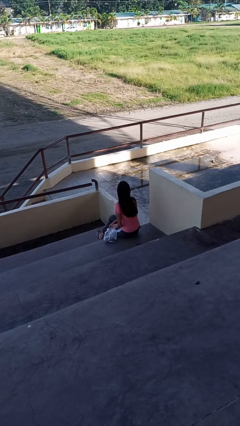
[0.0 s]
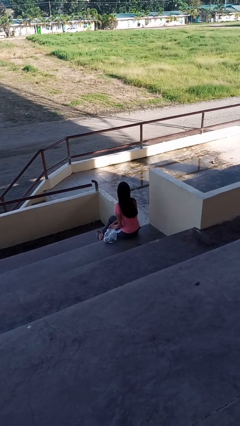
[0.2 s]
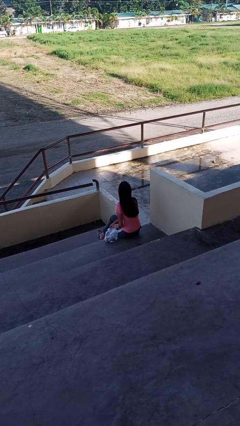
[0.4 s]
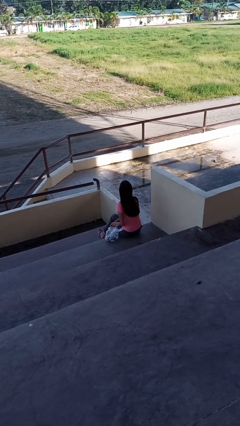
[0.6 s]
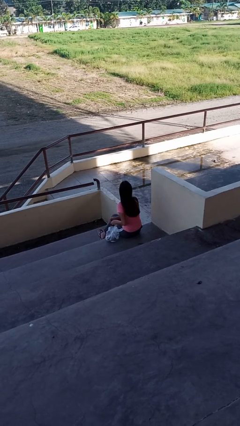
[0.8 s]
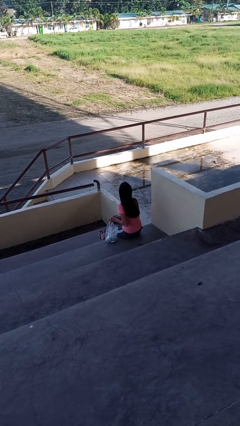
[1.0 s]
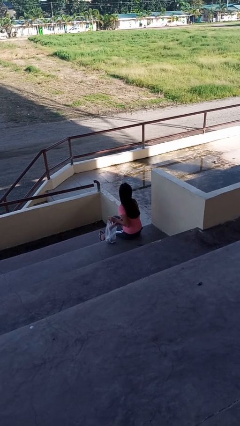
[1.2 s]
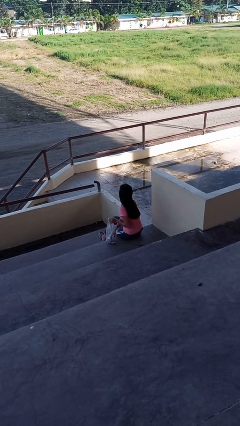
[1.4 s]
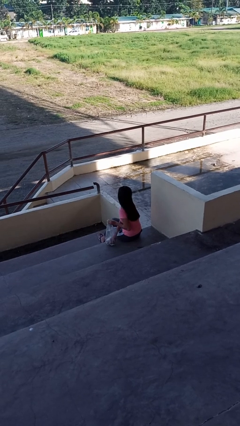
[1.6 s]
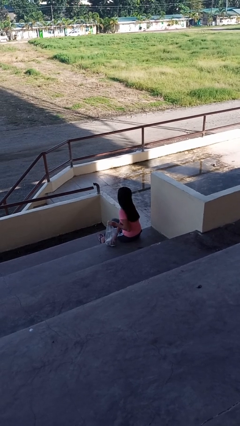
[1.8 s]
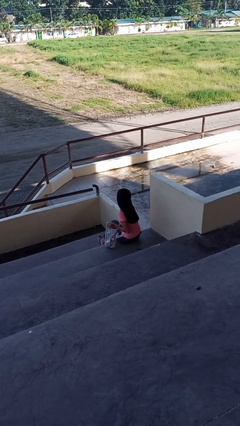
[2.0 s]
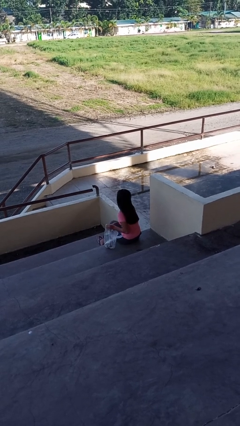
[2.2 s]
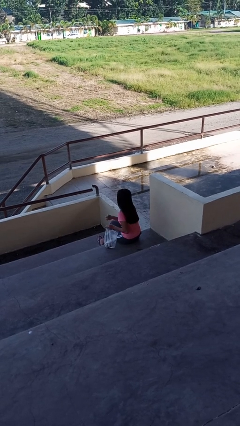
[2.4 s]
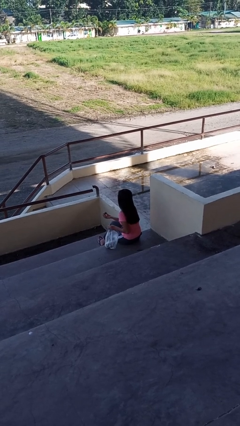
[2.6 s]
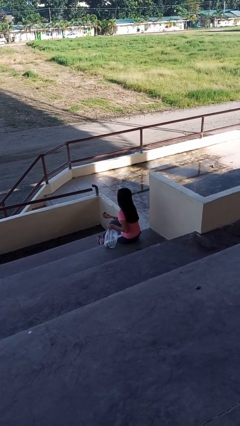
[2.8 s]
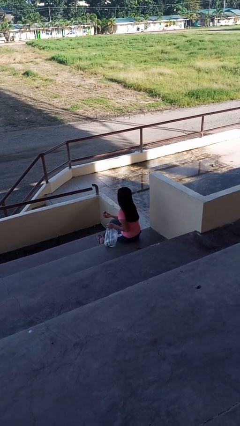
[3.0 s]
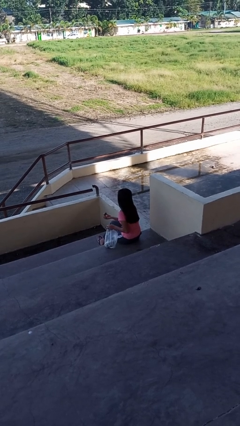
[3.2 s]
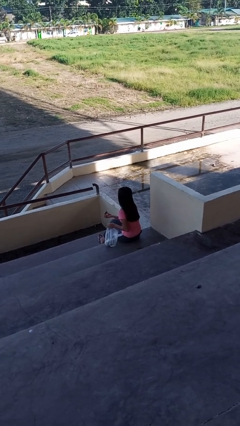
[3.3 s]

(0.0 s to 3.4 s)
person takes object from bag

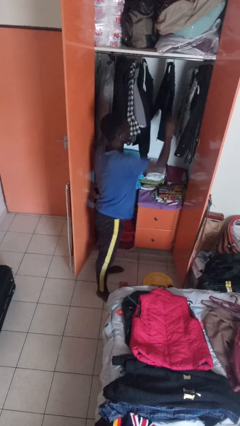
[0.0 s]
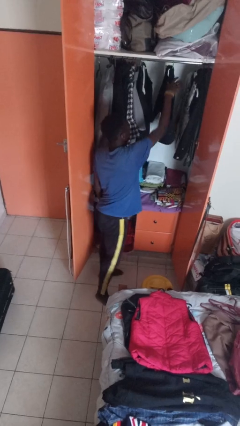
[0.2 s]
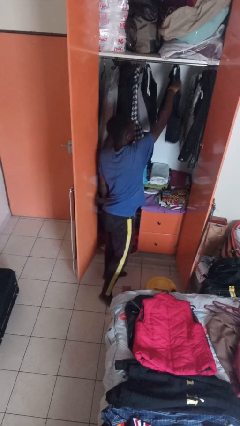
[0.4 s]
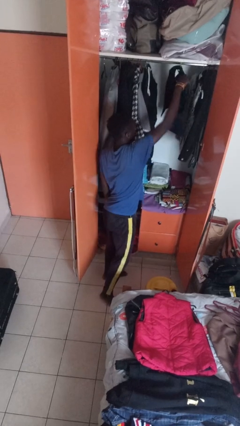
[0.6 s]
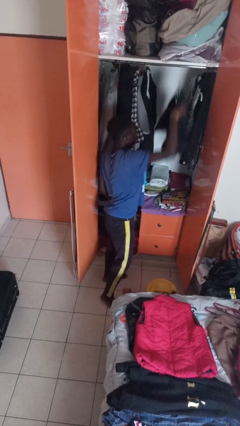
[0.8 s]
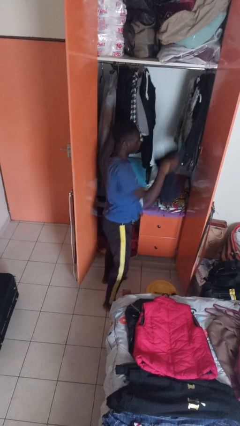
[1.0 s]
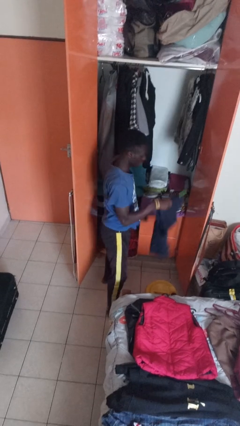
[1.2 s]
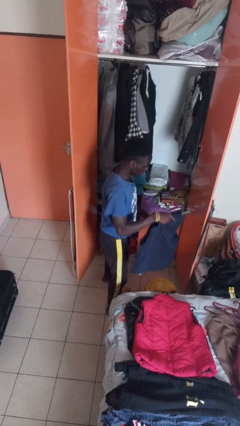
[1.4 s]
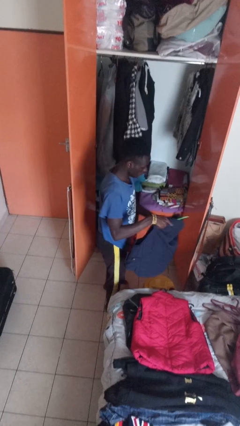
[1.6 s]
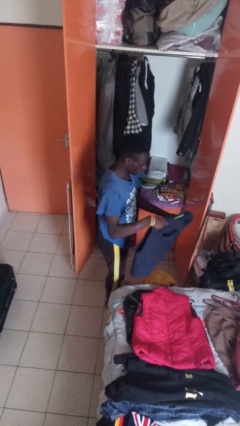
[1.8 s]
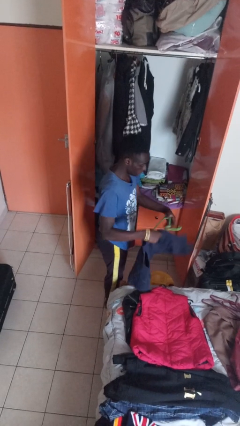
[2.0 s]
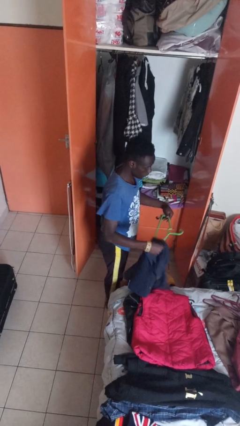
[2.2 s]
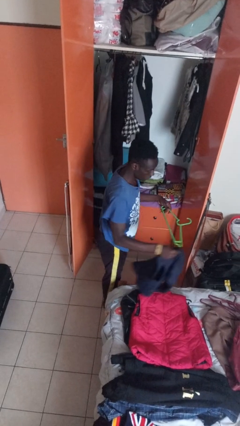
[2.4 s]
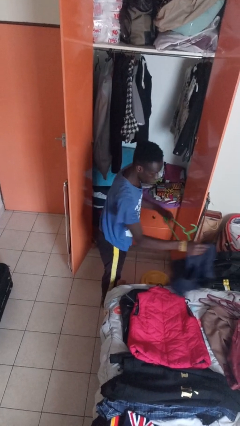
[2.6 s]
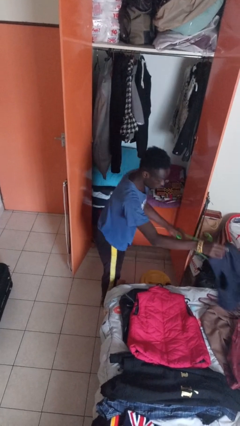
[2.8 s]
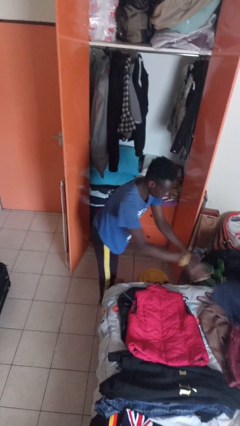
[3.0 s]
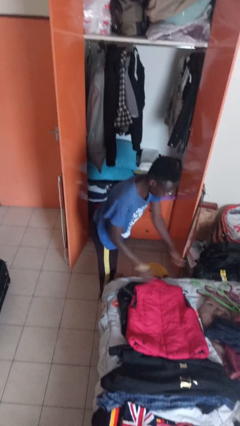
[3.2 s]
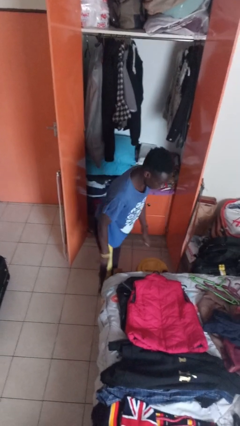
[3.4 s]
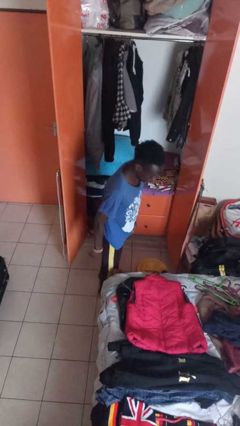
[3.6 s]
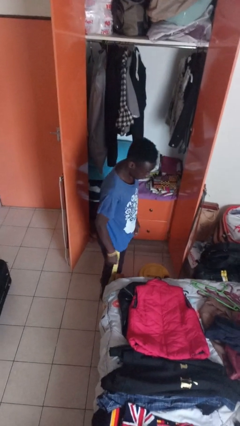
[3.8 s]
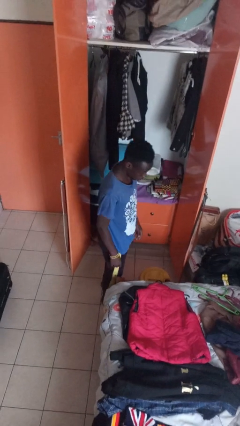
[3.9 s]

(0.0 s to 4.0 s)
person takes clothes from closet

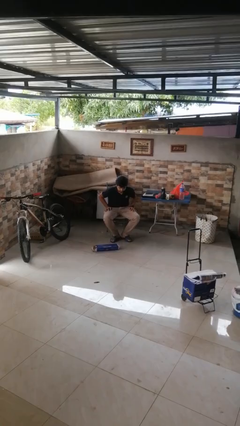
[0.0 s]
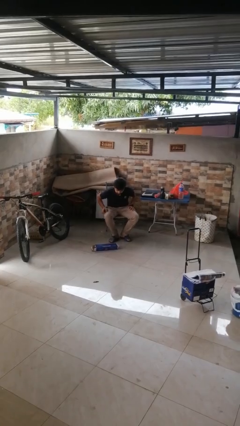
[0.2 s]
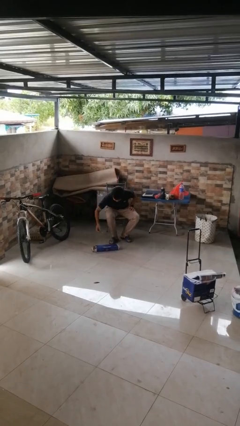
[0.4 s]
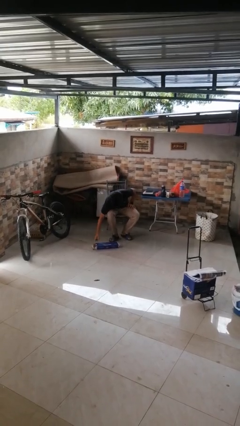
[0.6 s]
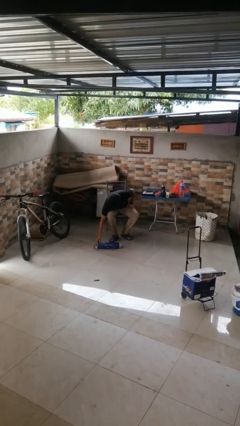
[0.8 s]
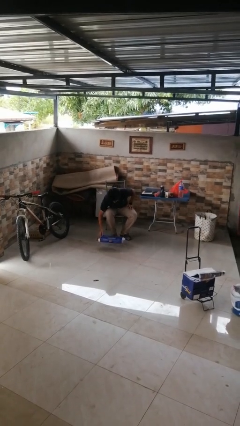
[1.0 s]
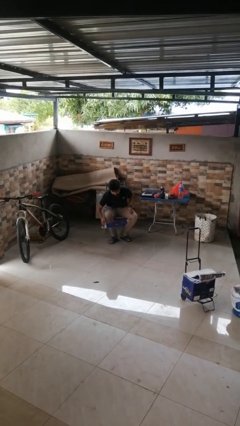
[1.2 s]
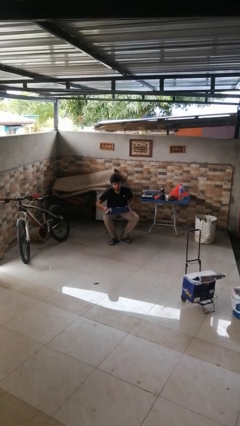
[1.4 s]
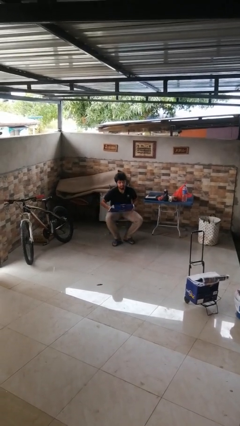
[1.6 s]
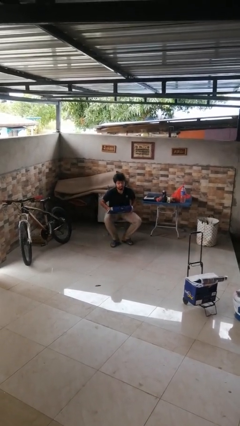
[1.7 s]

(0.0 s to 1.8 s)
person stands up from floor

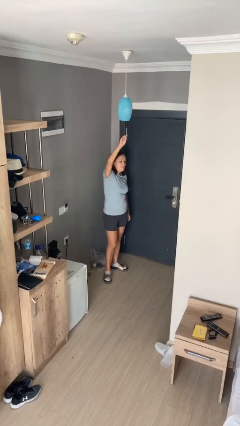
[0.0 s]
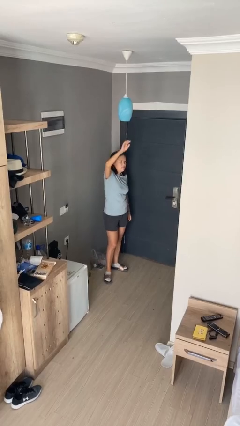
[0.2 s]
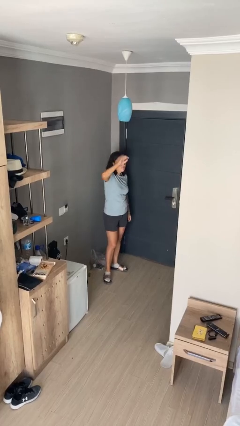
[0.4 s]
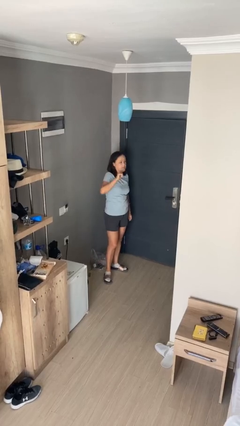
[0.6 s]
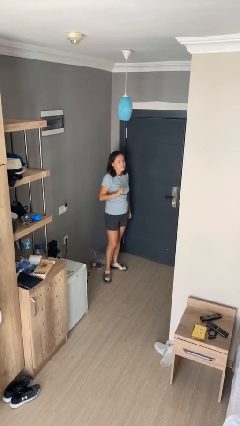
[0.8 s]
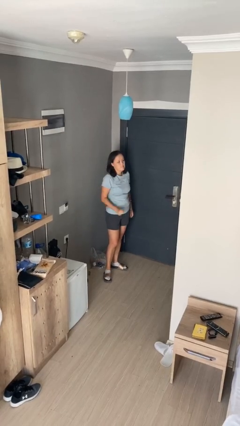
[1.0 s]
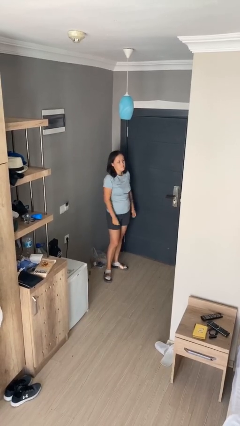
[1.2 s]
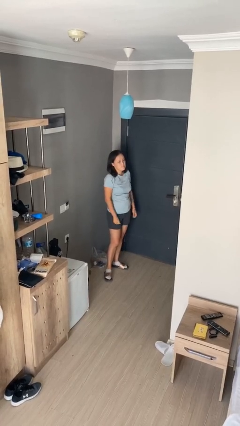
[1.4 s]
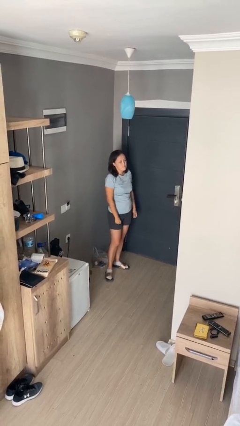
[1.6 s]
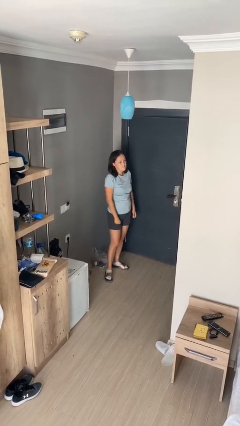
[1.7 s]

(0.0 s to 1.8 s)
person gestures lower hand

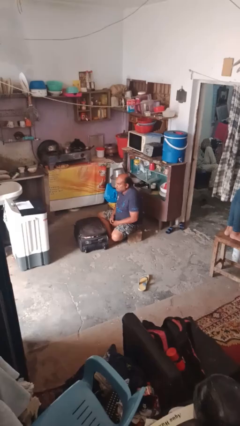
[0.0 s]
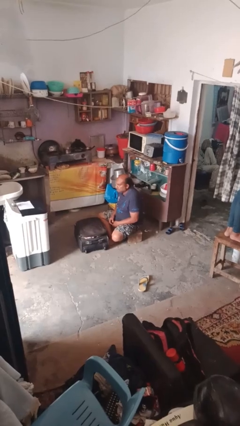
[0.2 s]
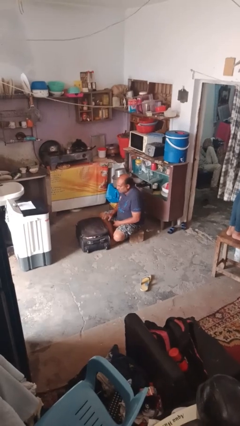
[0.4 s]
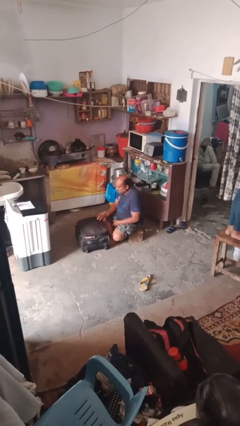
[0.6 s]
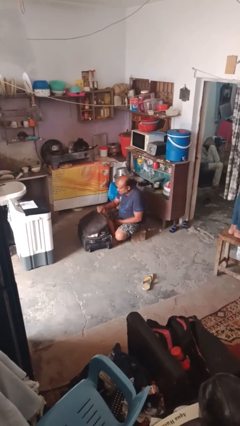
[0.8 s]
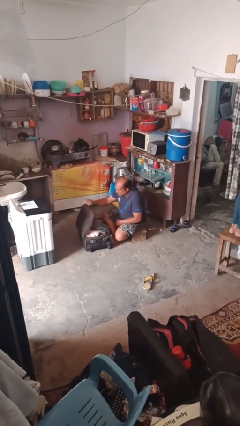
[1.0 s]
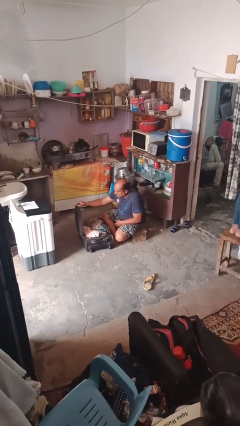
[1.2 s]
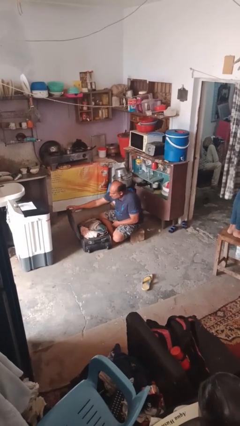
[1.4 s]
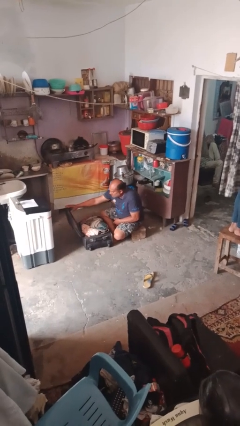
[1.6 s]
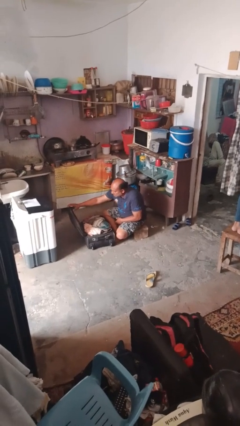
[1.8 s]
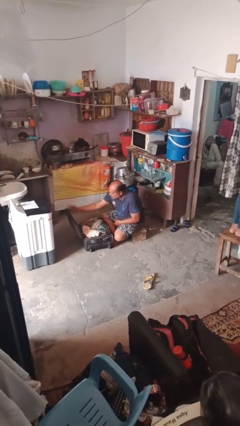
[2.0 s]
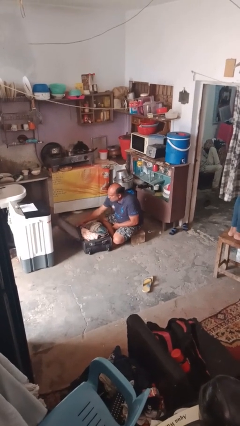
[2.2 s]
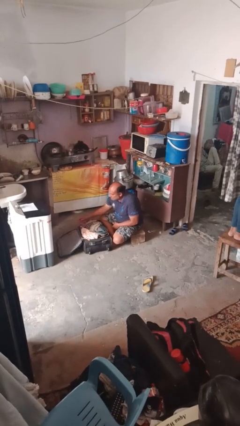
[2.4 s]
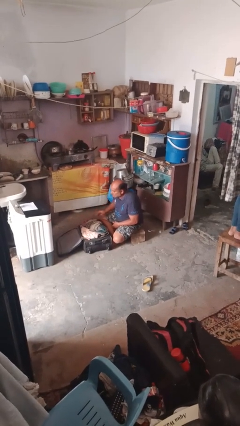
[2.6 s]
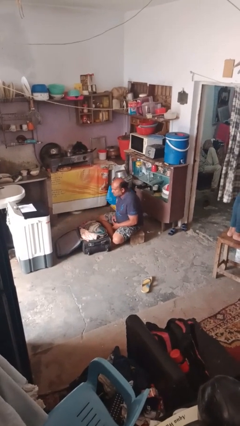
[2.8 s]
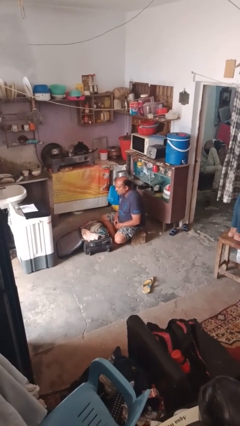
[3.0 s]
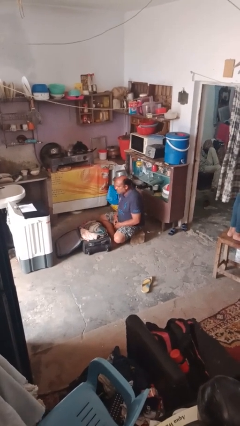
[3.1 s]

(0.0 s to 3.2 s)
person opens suitcase

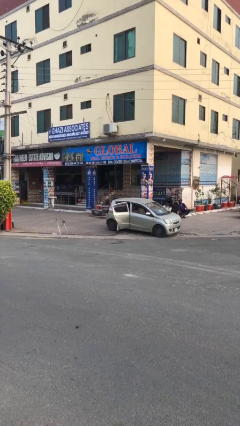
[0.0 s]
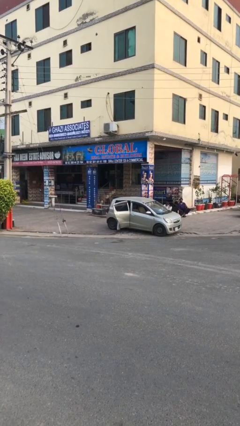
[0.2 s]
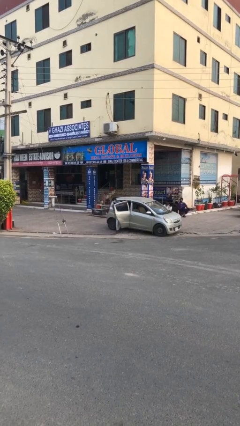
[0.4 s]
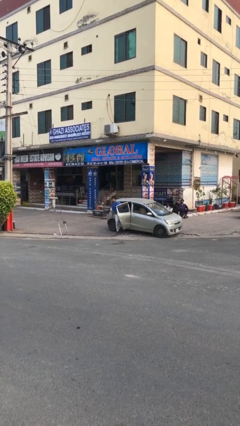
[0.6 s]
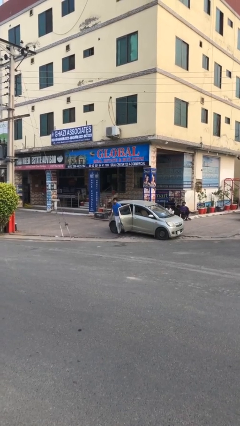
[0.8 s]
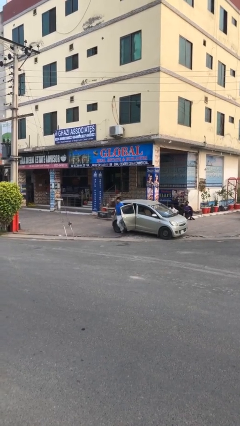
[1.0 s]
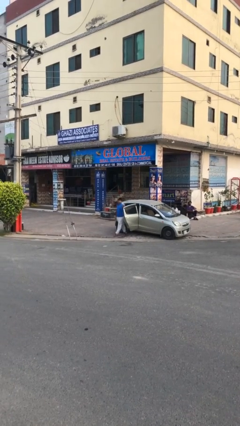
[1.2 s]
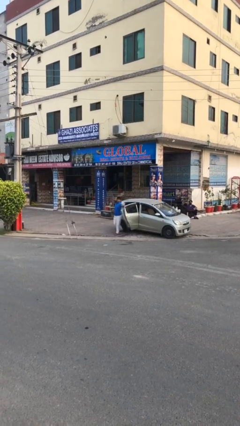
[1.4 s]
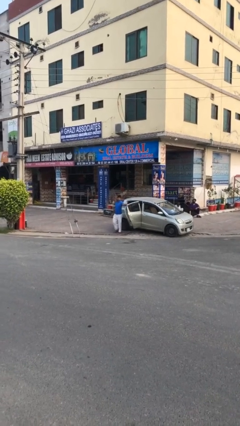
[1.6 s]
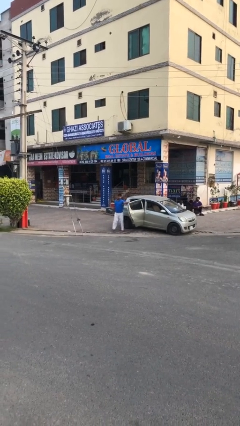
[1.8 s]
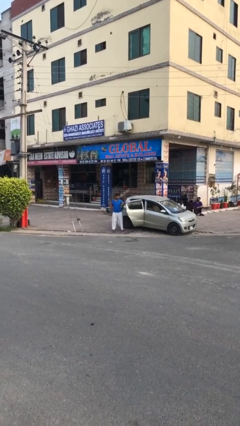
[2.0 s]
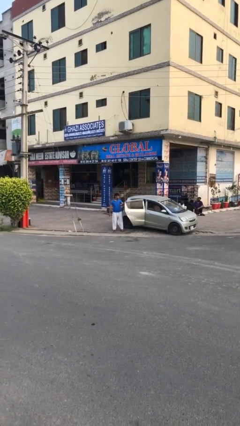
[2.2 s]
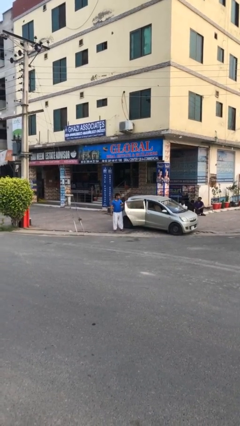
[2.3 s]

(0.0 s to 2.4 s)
person exits car

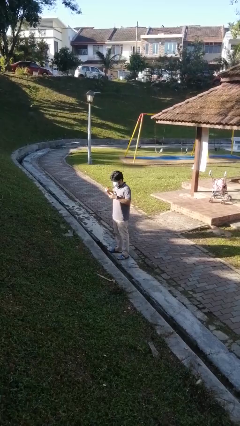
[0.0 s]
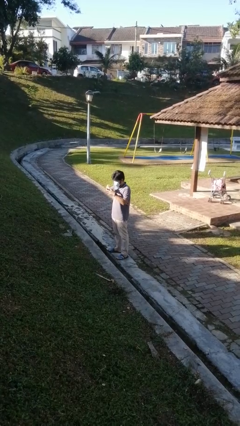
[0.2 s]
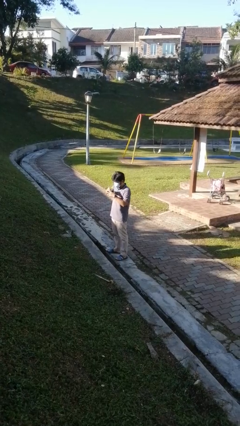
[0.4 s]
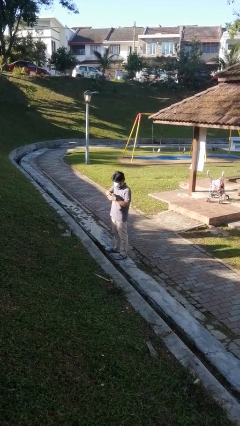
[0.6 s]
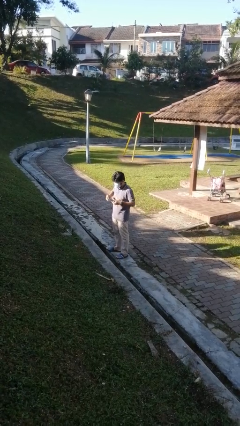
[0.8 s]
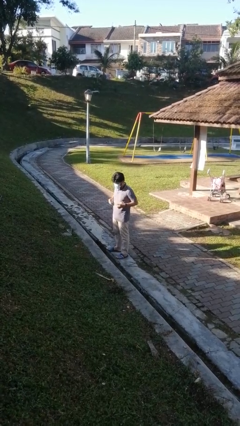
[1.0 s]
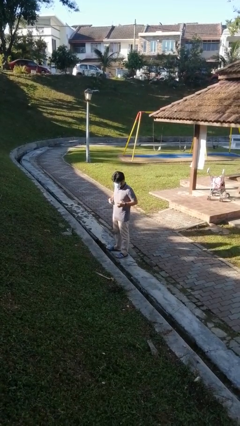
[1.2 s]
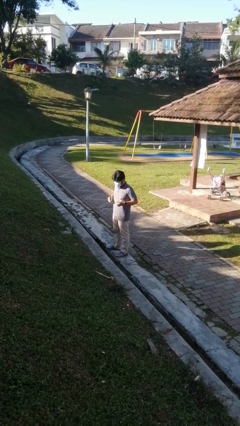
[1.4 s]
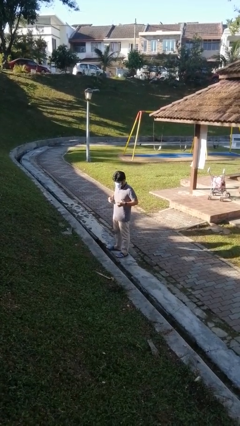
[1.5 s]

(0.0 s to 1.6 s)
person puts on ring
